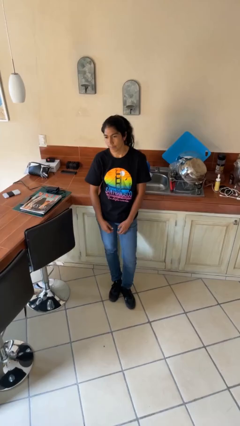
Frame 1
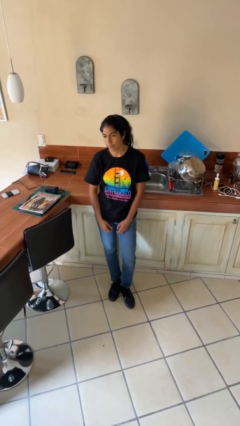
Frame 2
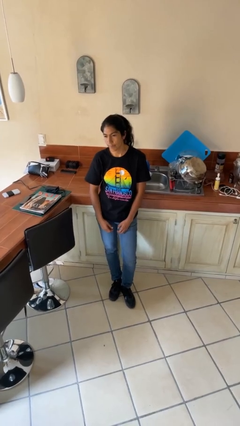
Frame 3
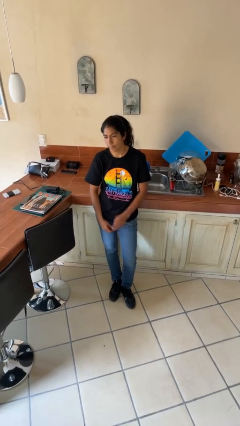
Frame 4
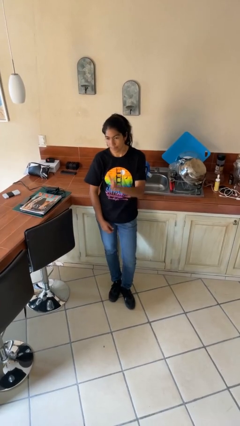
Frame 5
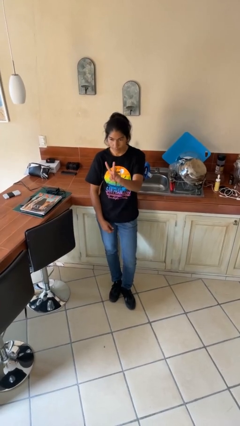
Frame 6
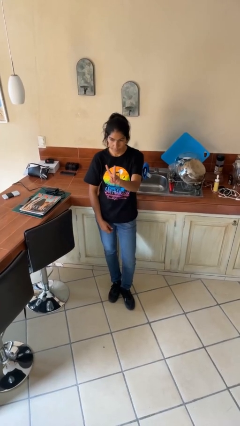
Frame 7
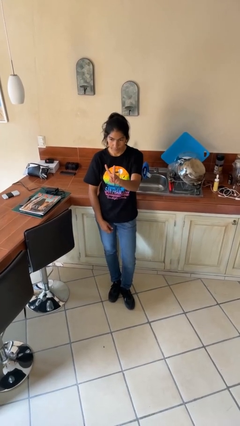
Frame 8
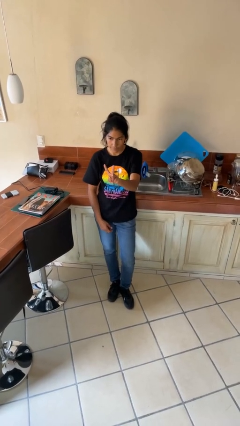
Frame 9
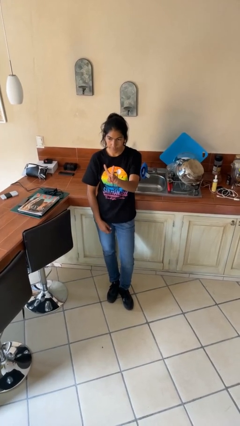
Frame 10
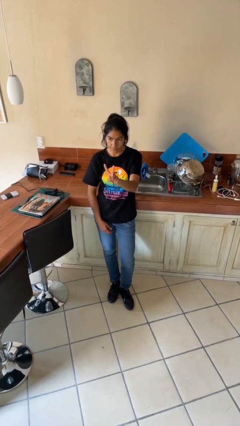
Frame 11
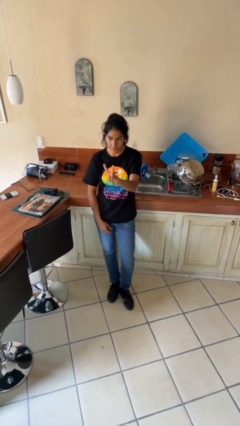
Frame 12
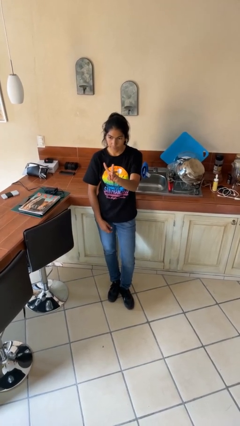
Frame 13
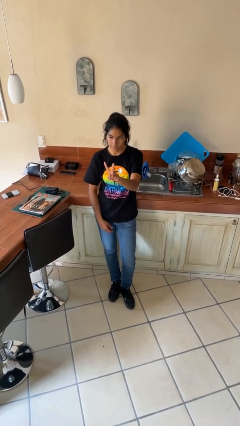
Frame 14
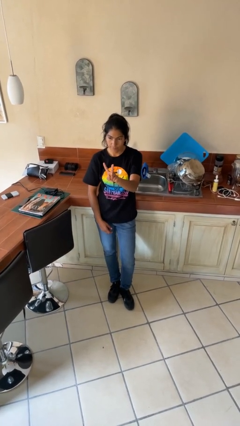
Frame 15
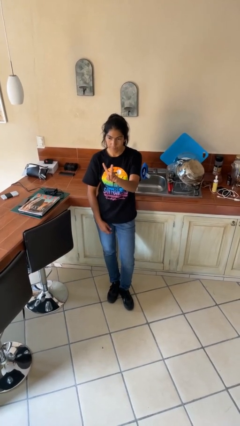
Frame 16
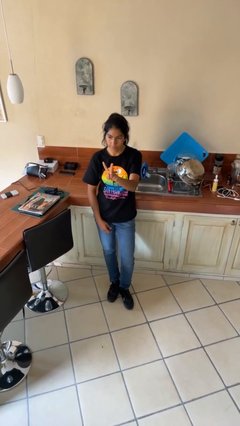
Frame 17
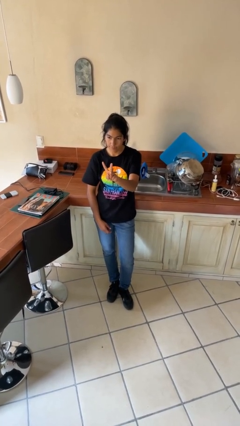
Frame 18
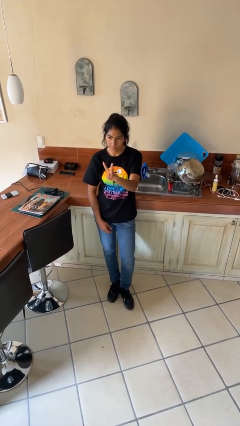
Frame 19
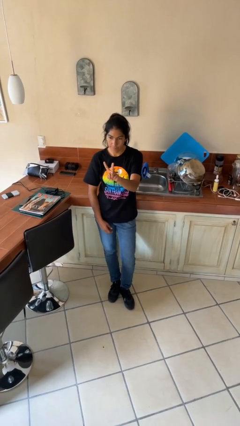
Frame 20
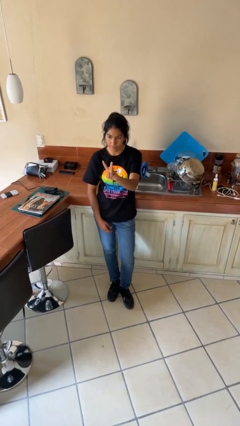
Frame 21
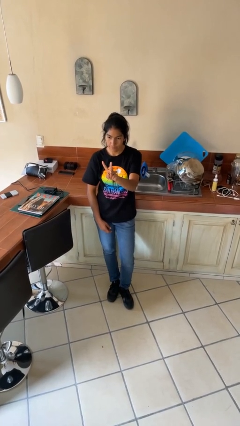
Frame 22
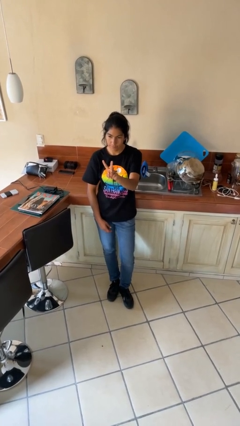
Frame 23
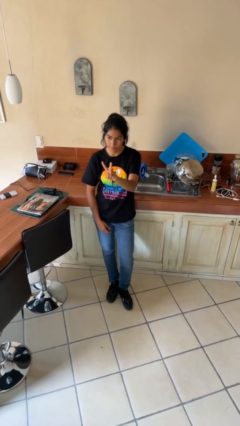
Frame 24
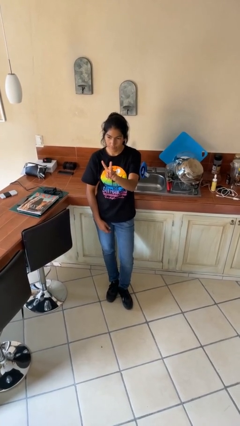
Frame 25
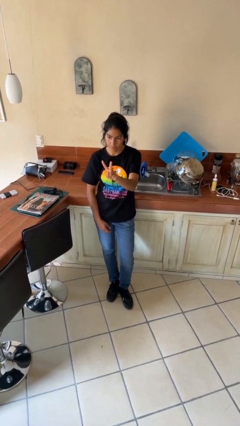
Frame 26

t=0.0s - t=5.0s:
person gestures peace

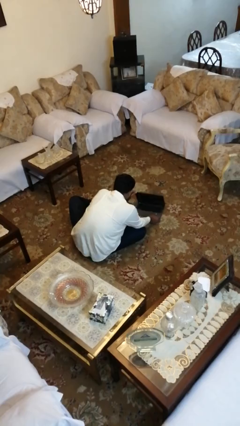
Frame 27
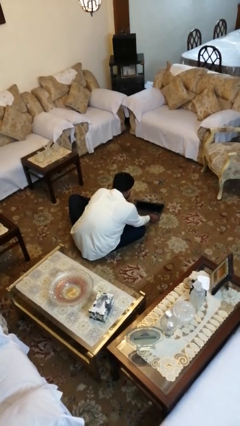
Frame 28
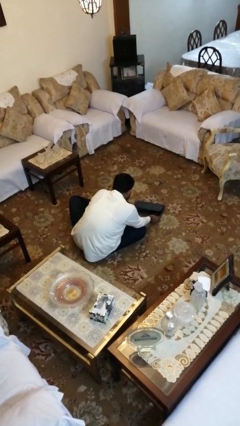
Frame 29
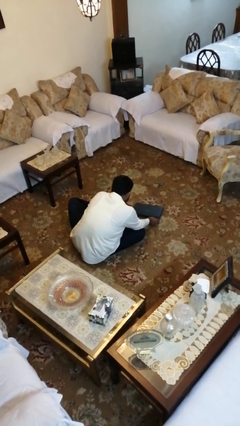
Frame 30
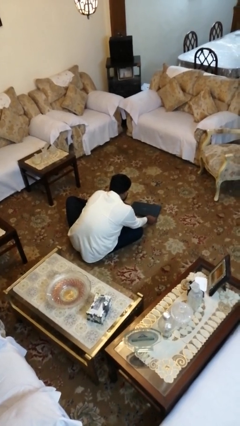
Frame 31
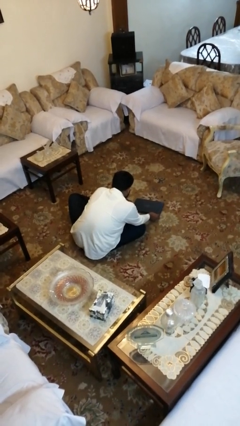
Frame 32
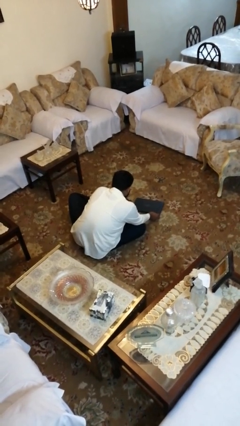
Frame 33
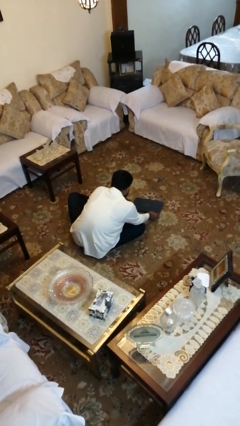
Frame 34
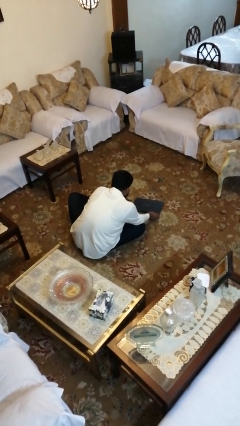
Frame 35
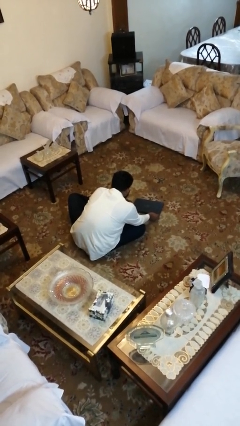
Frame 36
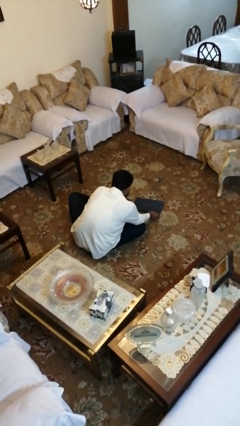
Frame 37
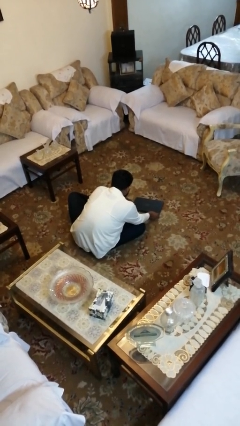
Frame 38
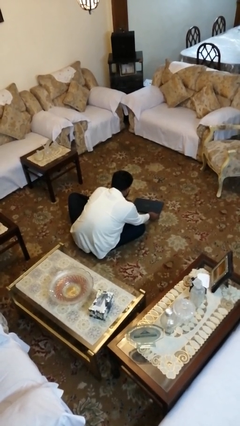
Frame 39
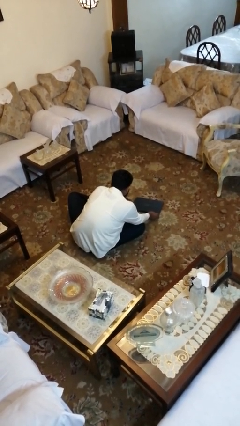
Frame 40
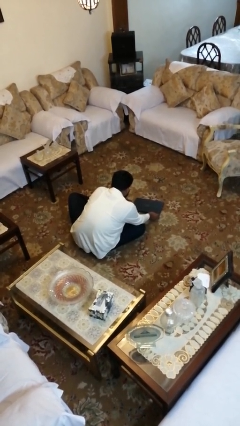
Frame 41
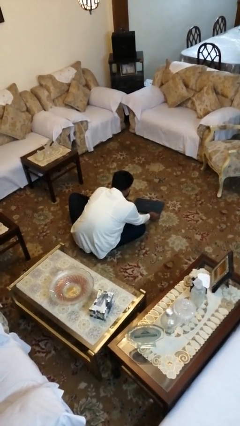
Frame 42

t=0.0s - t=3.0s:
person closes laptop

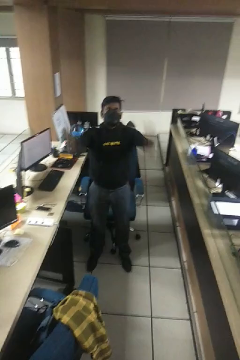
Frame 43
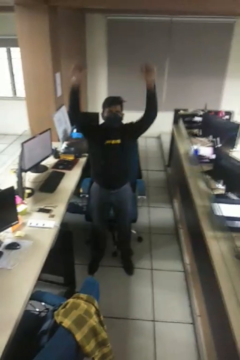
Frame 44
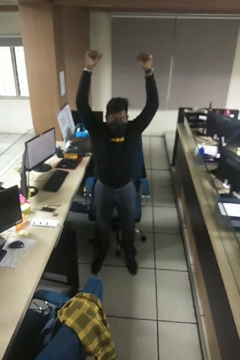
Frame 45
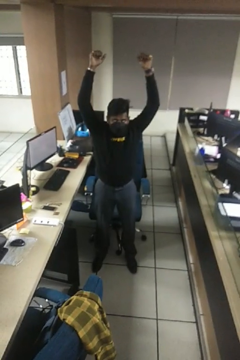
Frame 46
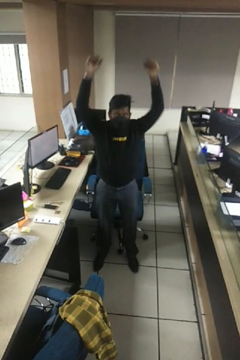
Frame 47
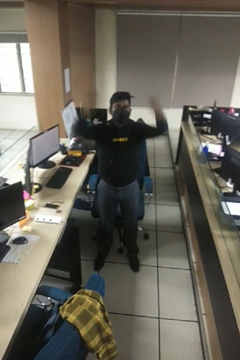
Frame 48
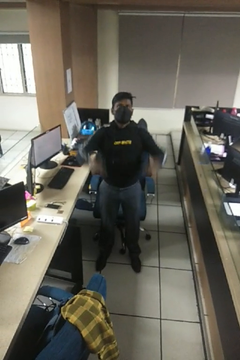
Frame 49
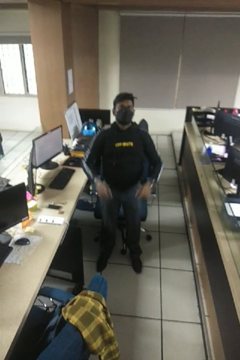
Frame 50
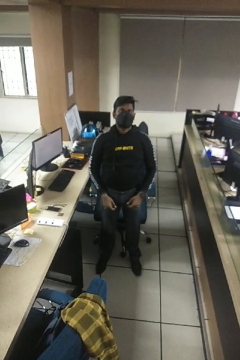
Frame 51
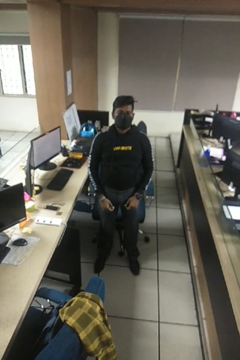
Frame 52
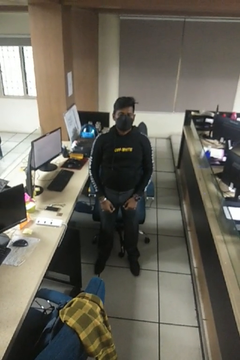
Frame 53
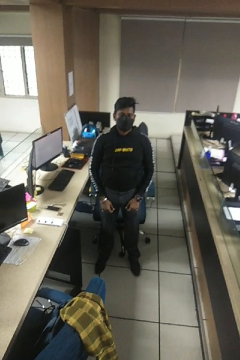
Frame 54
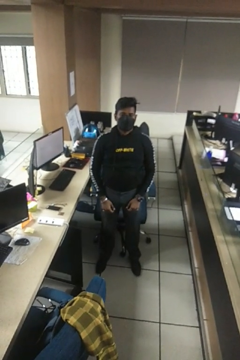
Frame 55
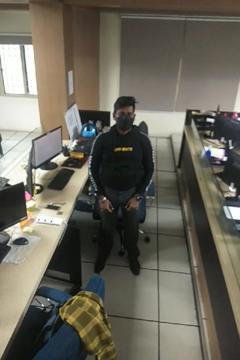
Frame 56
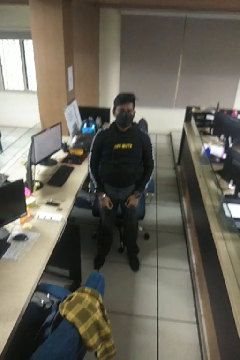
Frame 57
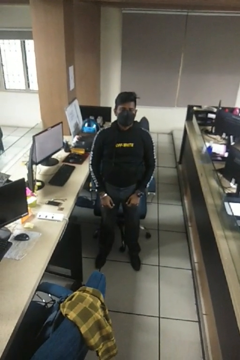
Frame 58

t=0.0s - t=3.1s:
person stretches arms over head

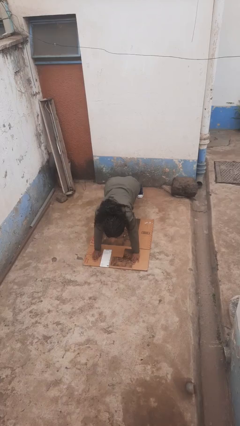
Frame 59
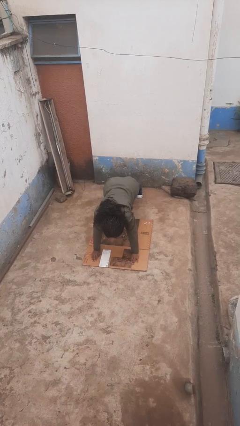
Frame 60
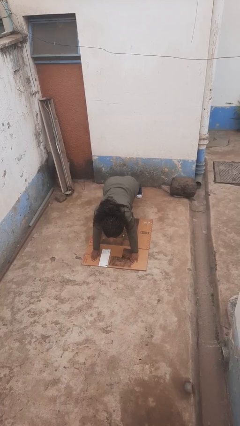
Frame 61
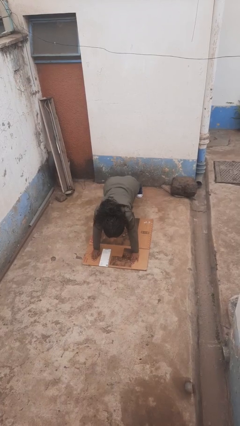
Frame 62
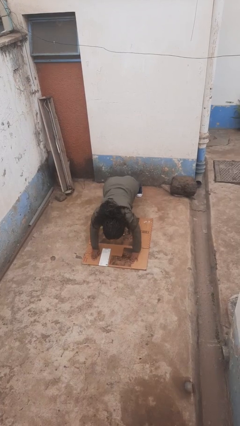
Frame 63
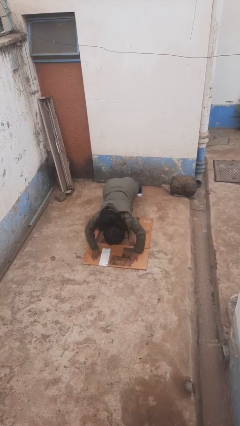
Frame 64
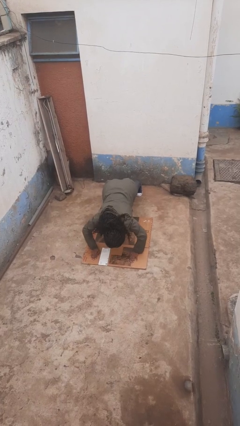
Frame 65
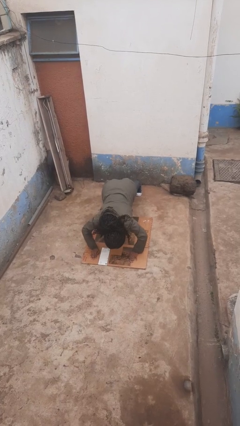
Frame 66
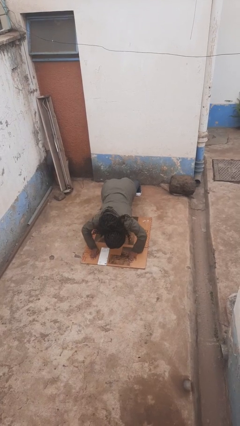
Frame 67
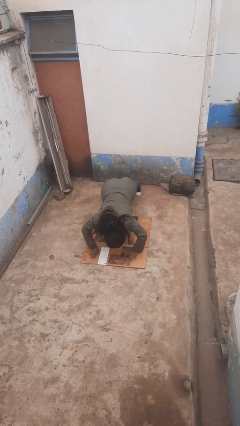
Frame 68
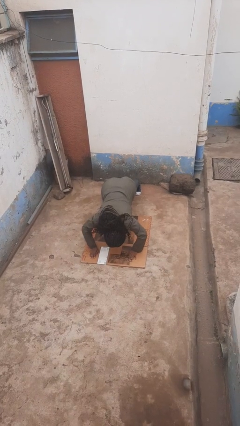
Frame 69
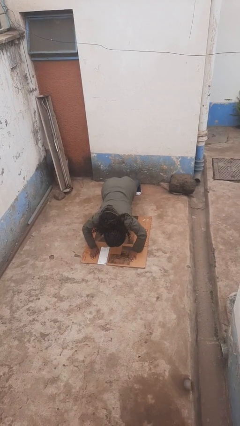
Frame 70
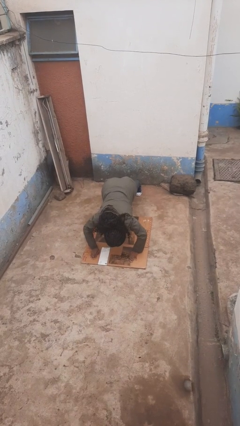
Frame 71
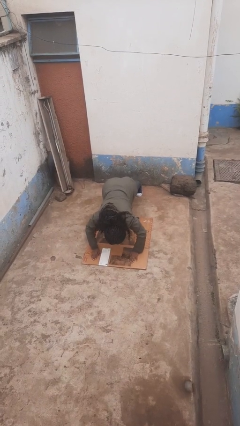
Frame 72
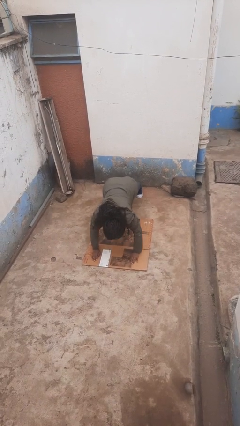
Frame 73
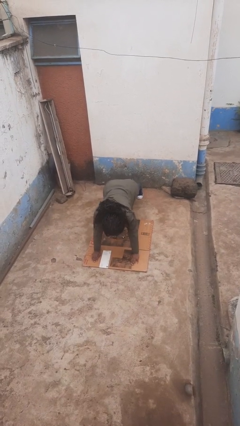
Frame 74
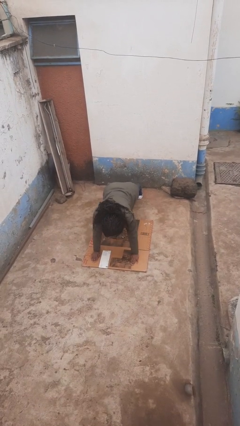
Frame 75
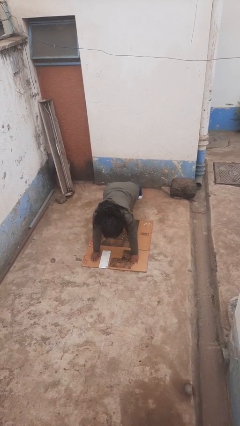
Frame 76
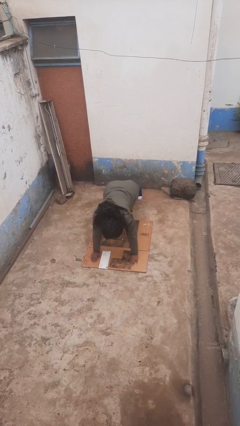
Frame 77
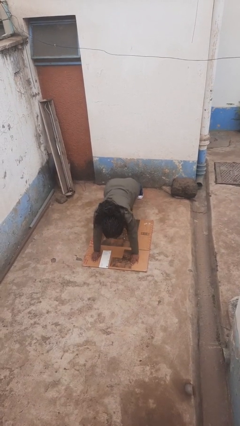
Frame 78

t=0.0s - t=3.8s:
person exercises with pushup

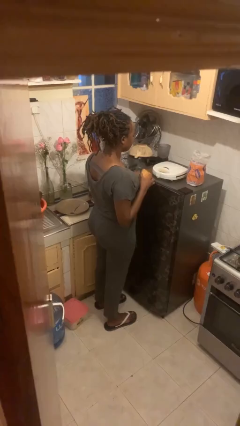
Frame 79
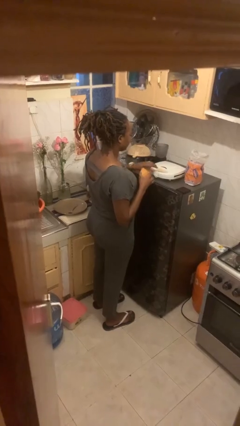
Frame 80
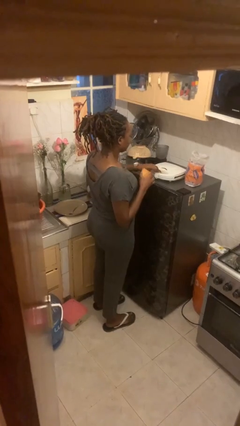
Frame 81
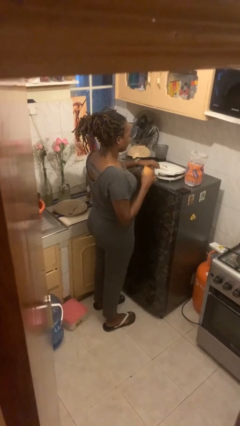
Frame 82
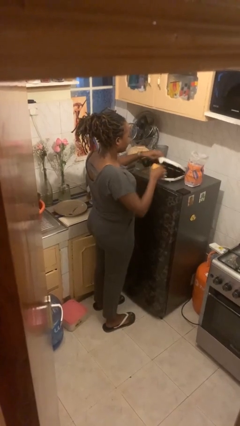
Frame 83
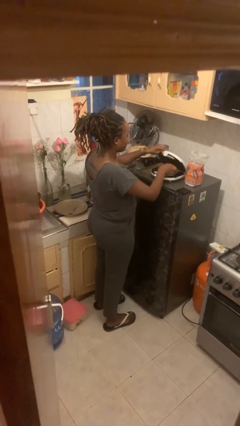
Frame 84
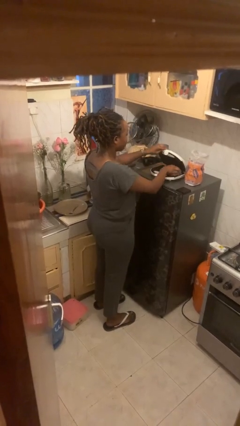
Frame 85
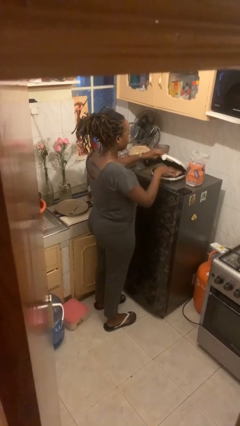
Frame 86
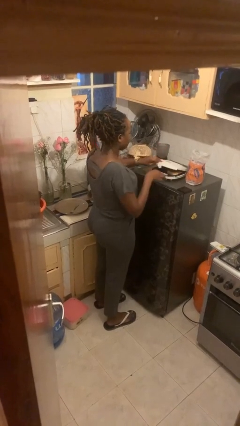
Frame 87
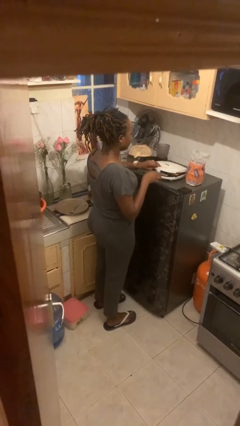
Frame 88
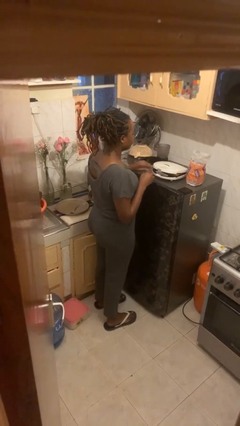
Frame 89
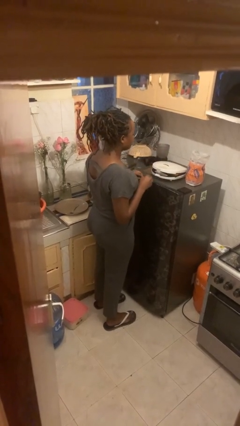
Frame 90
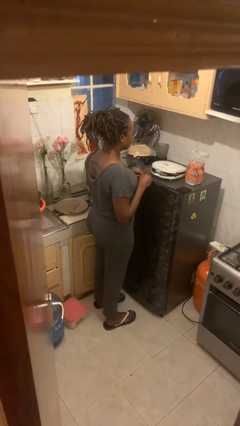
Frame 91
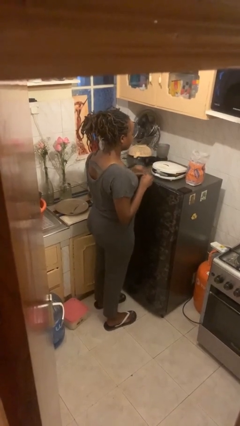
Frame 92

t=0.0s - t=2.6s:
person puts object into toaster

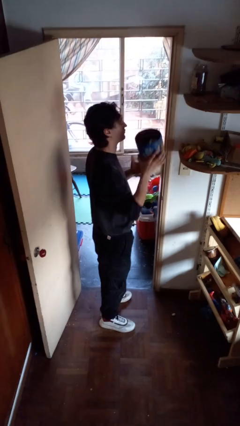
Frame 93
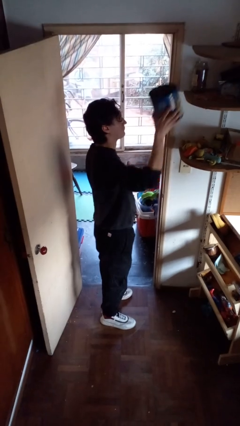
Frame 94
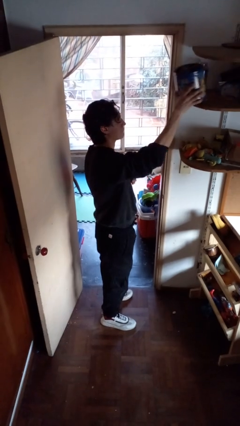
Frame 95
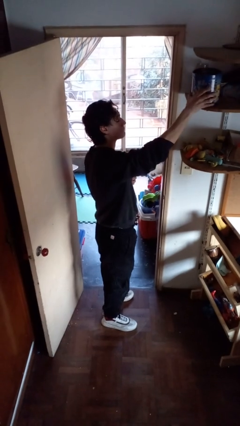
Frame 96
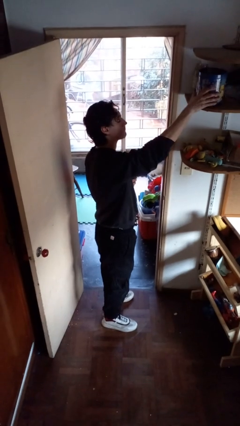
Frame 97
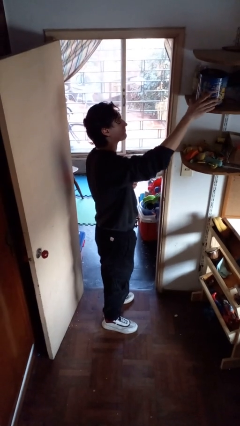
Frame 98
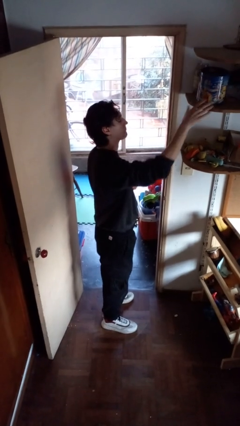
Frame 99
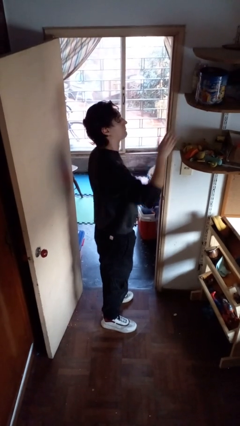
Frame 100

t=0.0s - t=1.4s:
person puts down object on shelf
